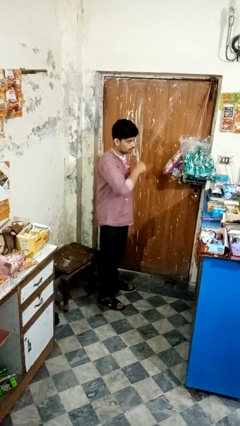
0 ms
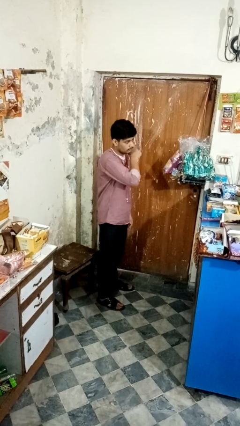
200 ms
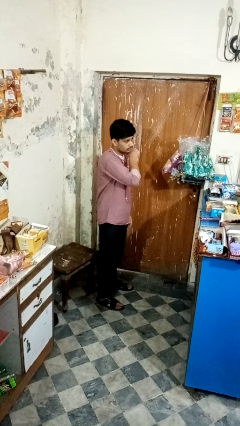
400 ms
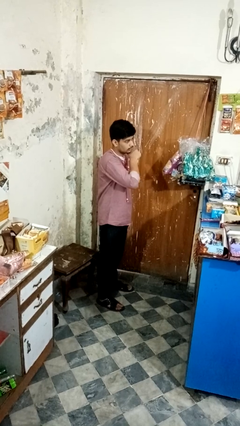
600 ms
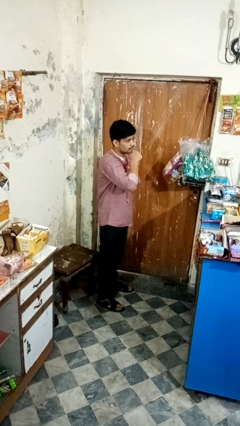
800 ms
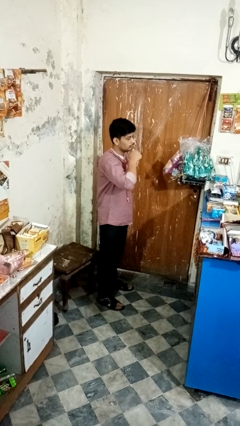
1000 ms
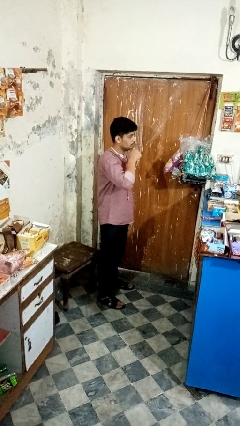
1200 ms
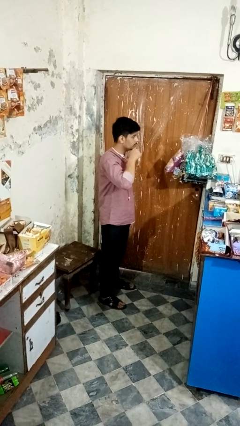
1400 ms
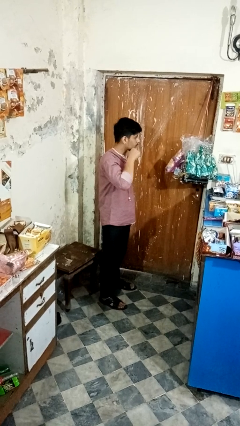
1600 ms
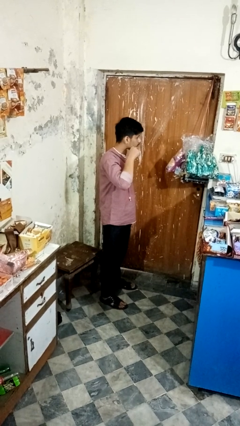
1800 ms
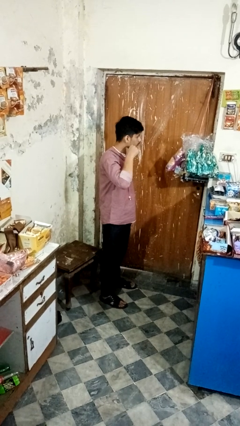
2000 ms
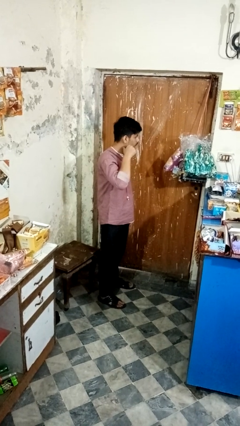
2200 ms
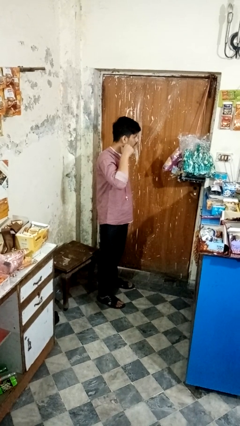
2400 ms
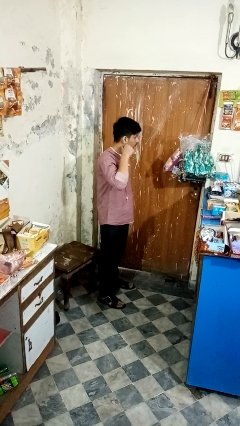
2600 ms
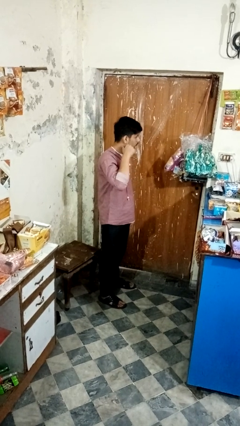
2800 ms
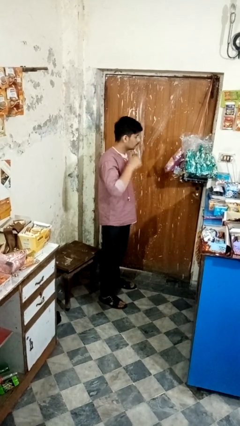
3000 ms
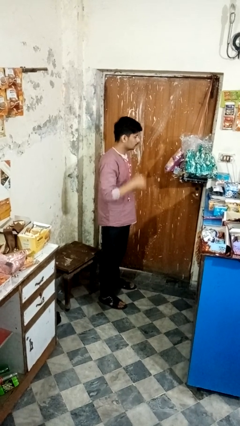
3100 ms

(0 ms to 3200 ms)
person gestures cut

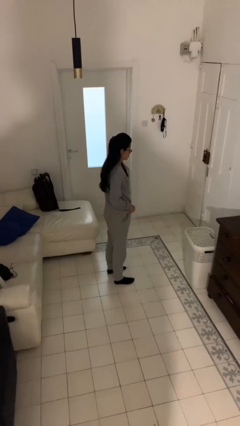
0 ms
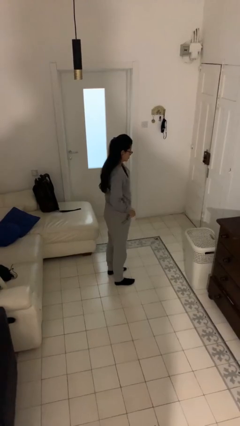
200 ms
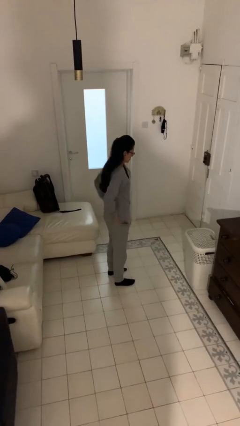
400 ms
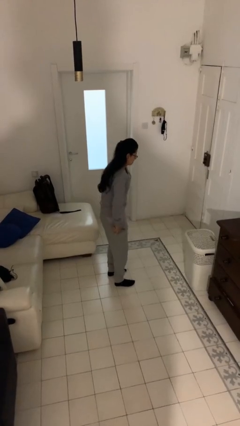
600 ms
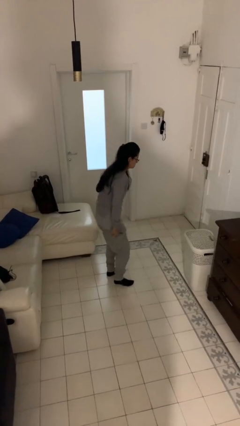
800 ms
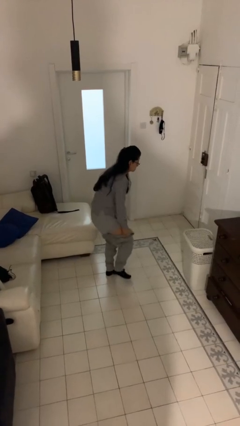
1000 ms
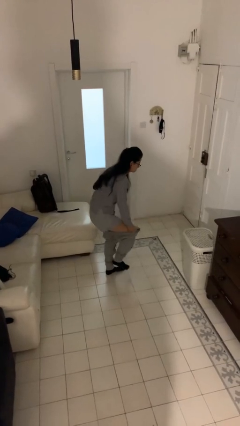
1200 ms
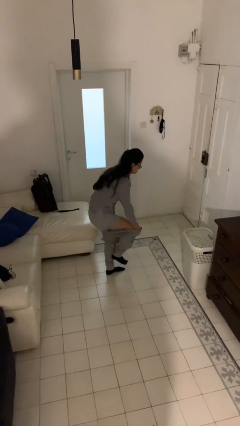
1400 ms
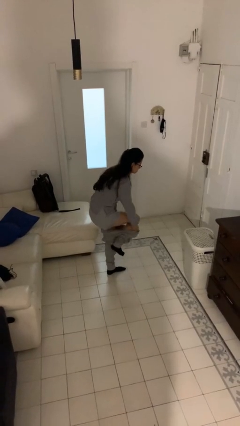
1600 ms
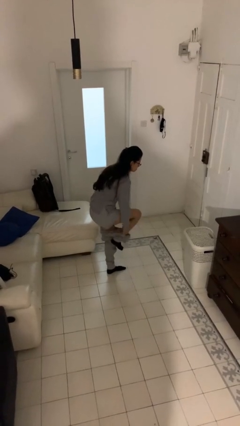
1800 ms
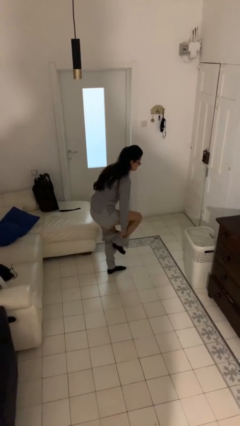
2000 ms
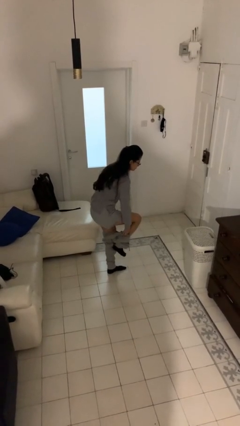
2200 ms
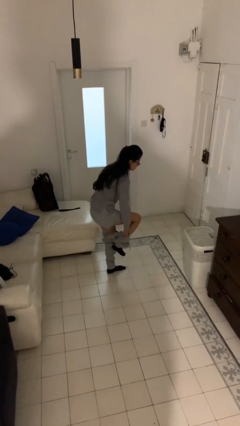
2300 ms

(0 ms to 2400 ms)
person takes off pants

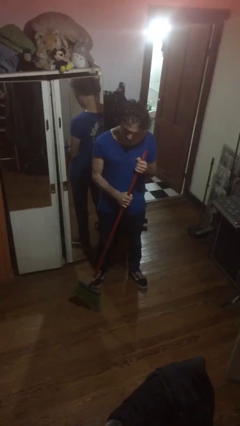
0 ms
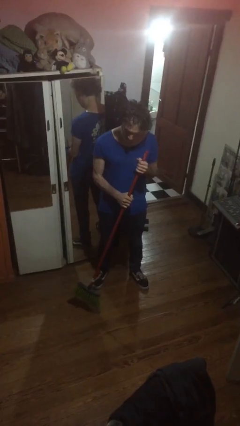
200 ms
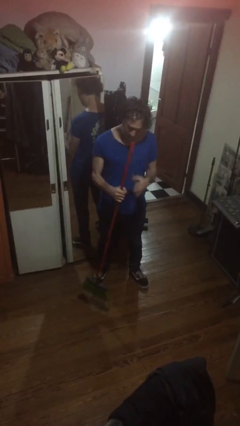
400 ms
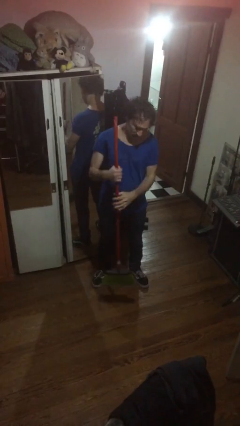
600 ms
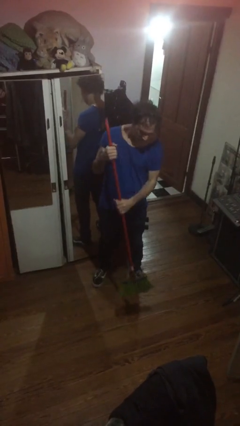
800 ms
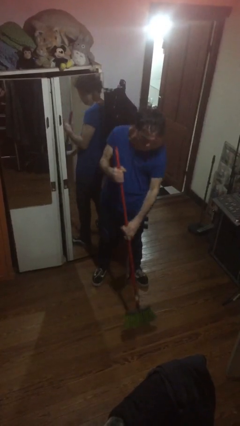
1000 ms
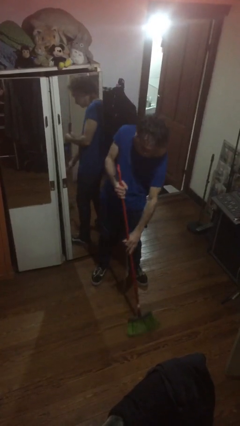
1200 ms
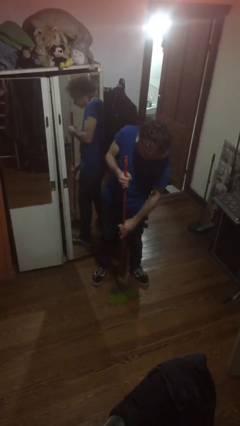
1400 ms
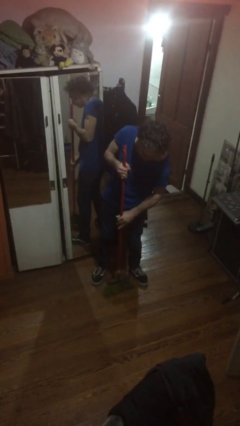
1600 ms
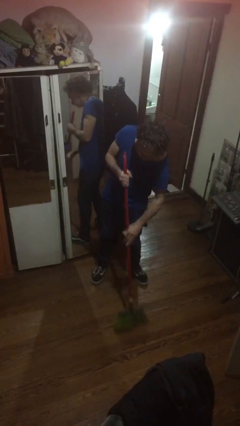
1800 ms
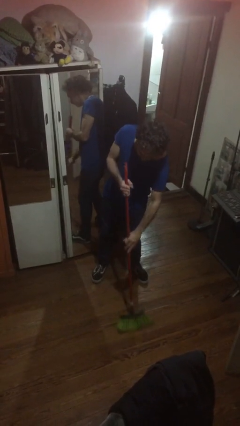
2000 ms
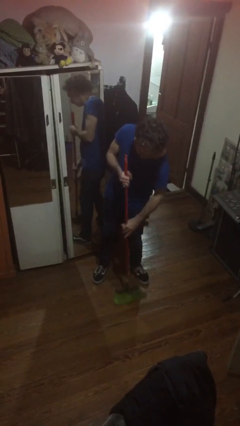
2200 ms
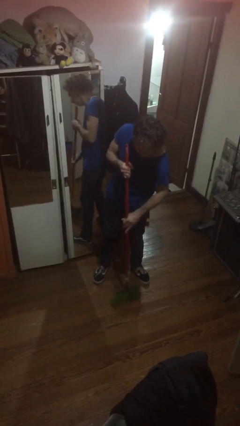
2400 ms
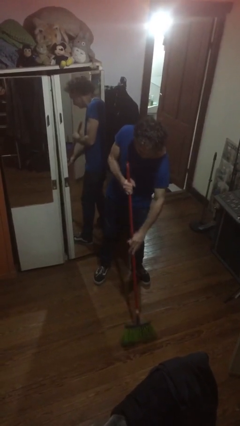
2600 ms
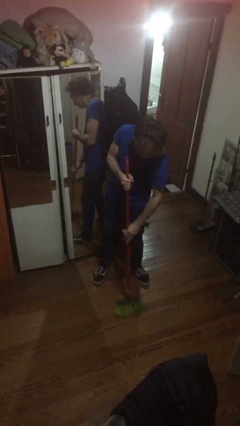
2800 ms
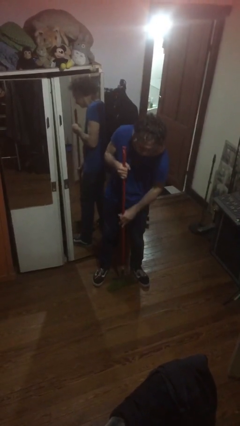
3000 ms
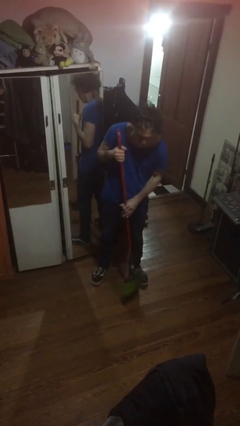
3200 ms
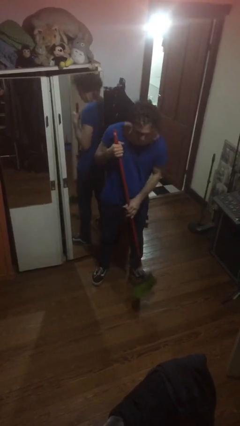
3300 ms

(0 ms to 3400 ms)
person sweeps floor

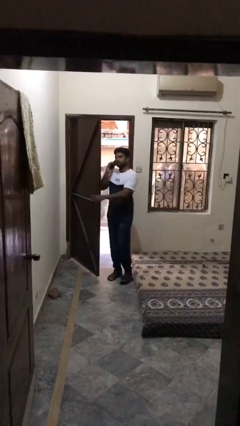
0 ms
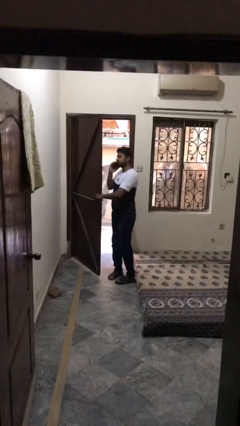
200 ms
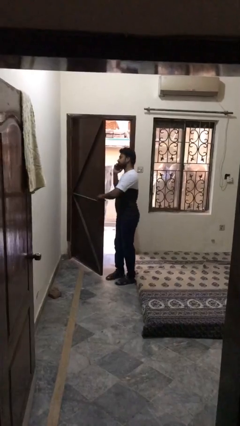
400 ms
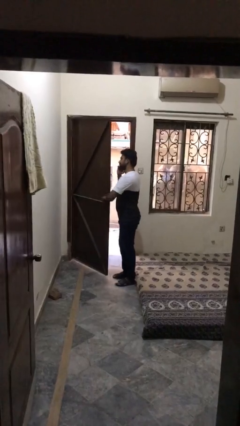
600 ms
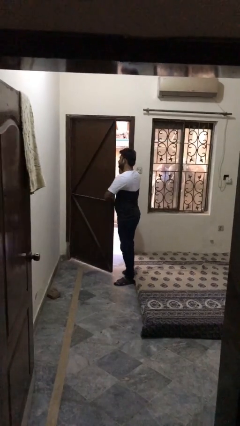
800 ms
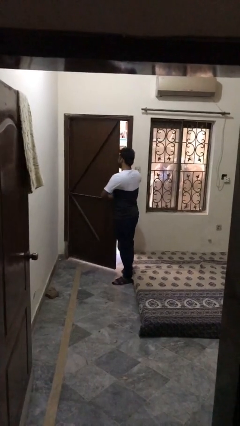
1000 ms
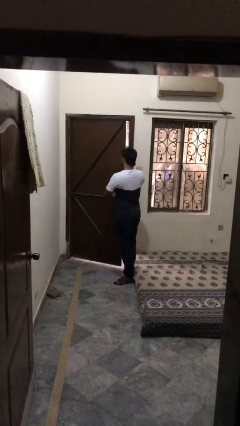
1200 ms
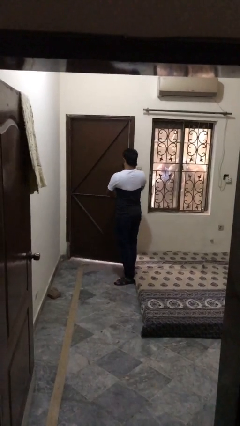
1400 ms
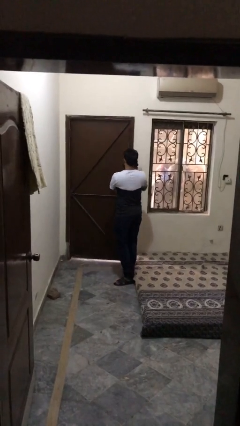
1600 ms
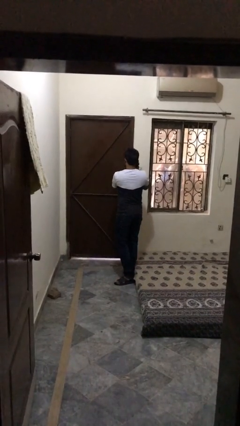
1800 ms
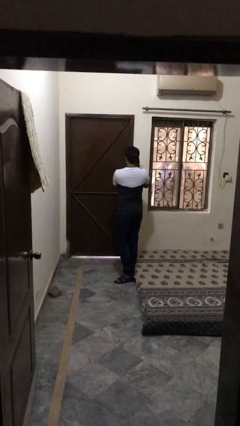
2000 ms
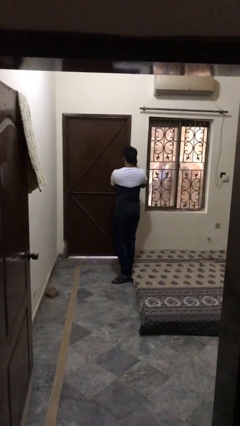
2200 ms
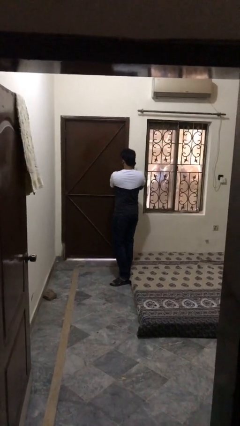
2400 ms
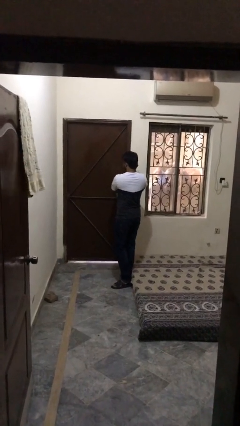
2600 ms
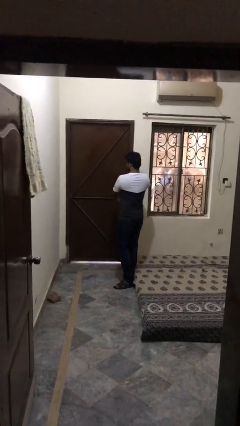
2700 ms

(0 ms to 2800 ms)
person closes facility door

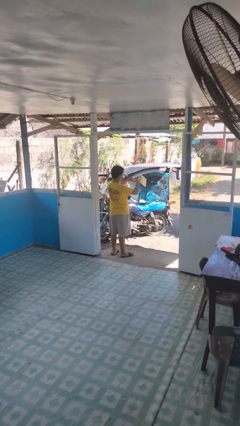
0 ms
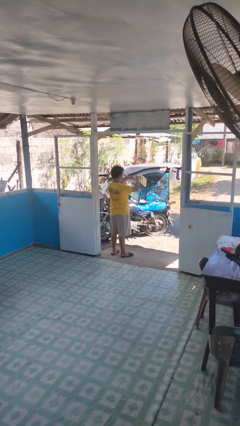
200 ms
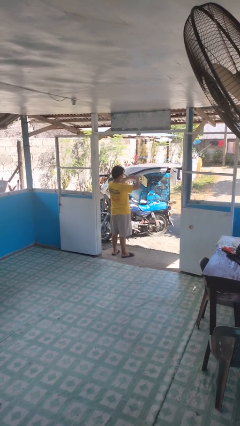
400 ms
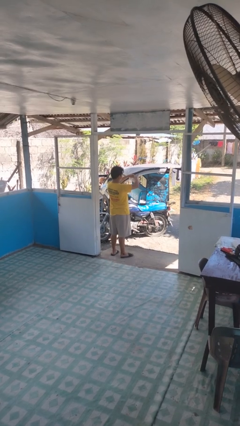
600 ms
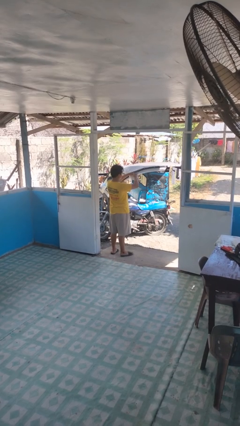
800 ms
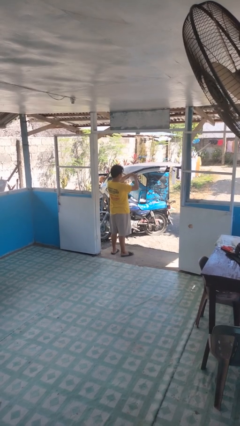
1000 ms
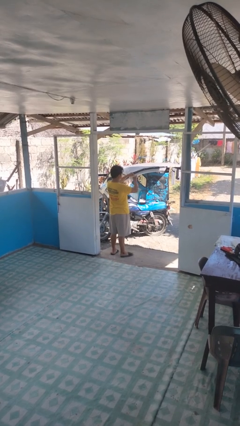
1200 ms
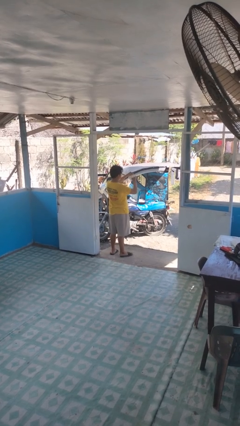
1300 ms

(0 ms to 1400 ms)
person tears paper

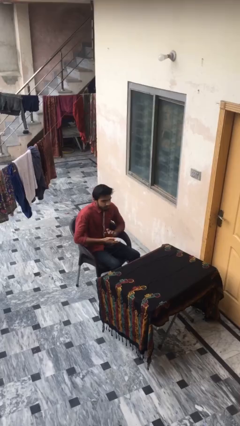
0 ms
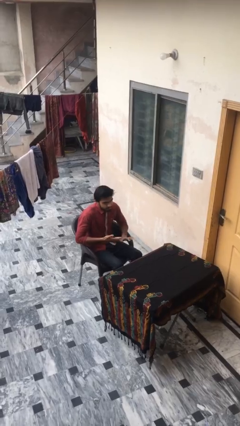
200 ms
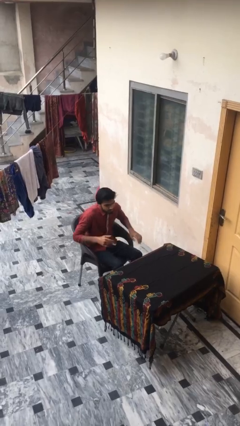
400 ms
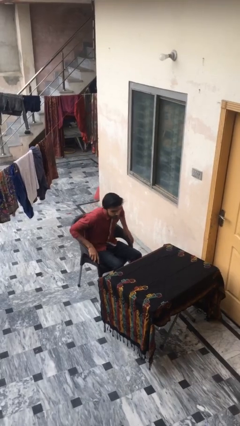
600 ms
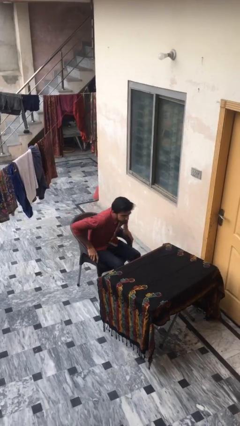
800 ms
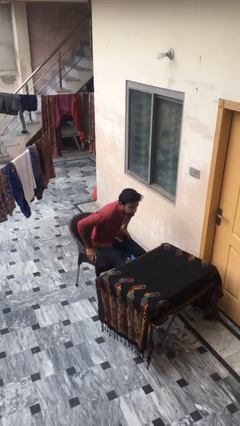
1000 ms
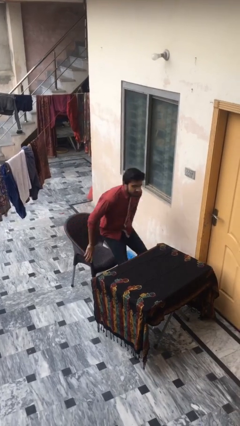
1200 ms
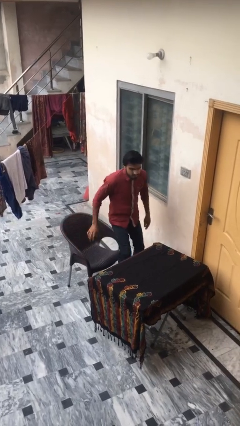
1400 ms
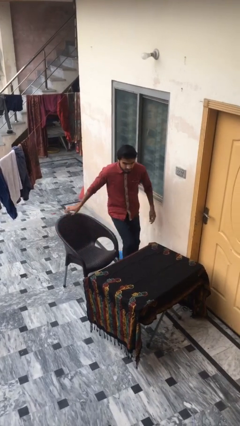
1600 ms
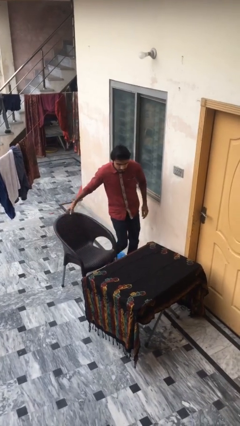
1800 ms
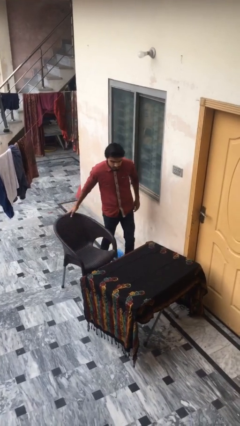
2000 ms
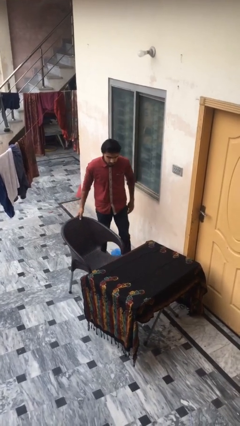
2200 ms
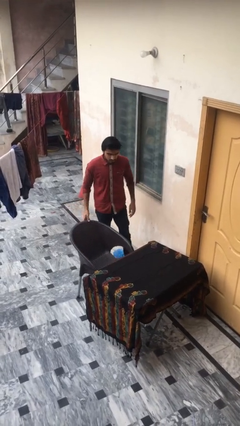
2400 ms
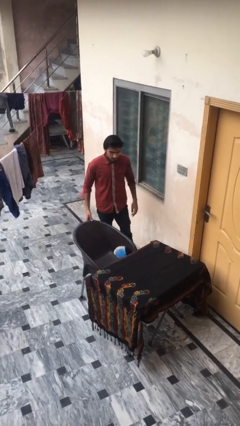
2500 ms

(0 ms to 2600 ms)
person stands up

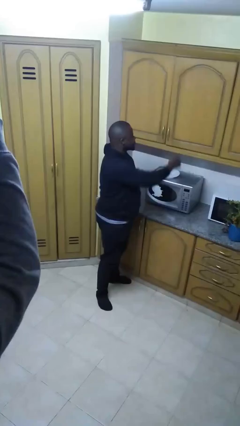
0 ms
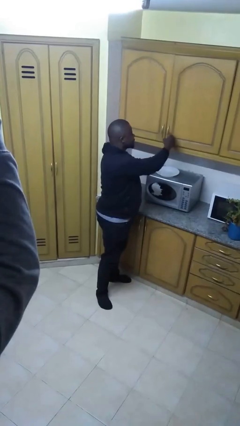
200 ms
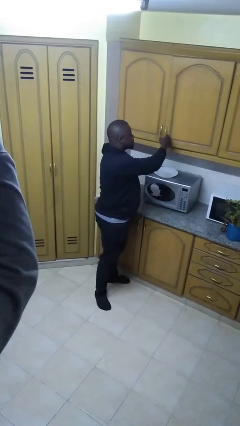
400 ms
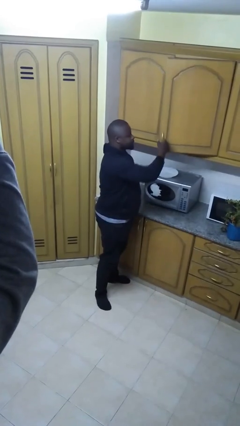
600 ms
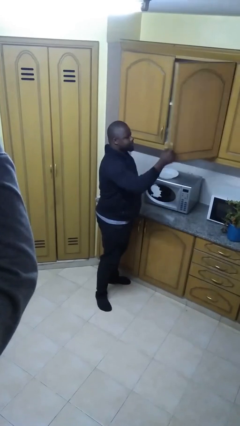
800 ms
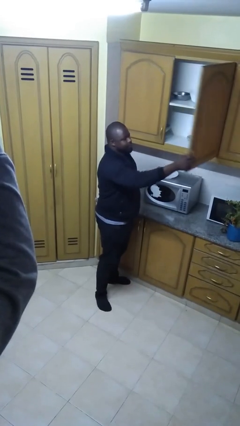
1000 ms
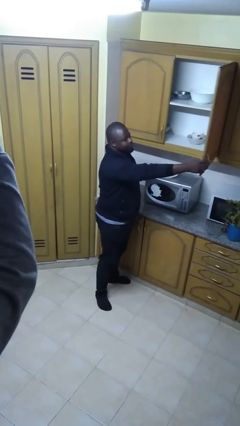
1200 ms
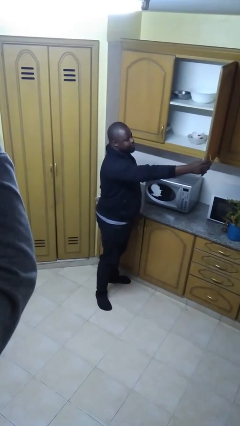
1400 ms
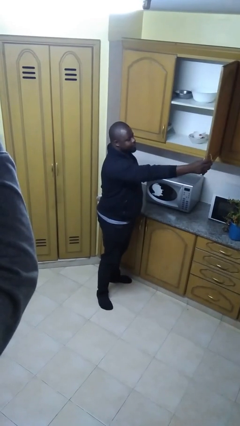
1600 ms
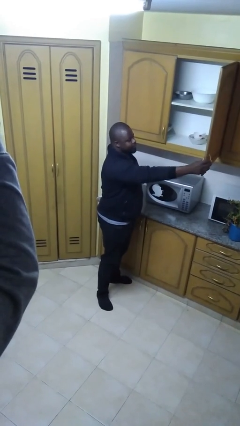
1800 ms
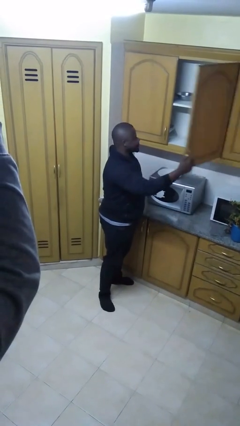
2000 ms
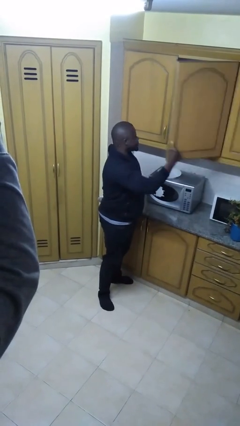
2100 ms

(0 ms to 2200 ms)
person opens cabinet
